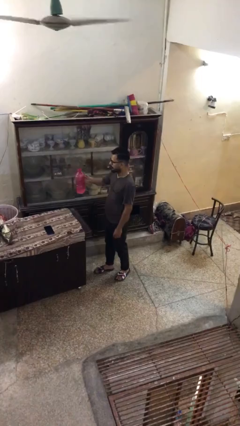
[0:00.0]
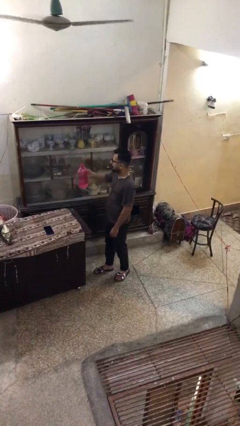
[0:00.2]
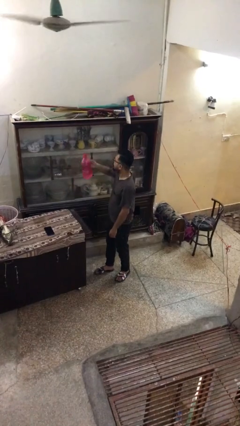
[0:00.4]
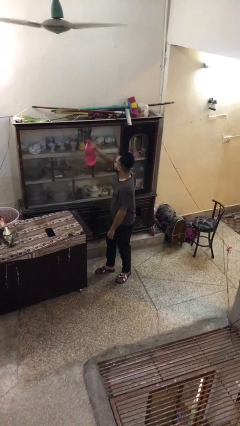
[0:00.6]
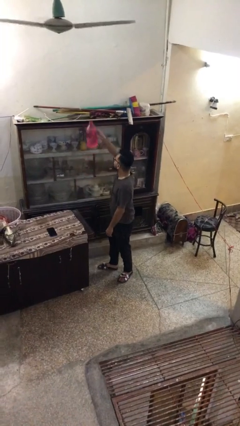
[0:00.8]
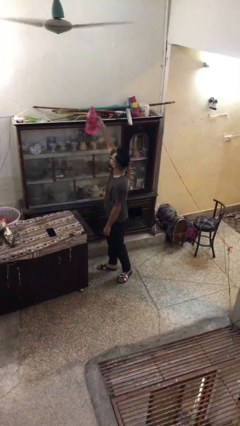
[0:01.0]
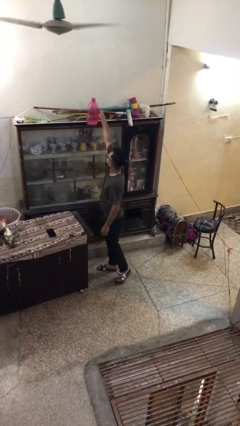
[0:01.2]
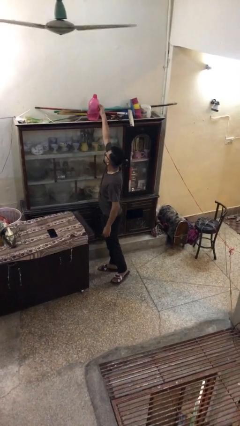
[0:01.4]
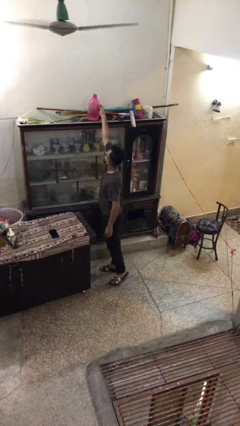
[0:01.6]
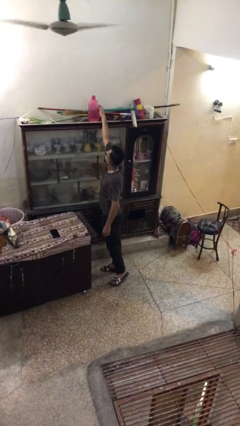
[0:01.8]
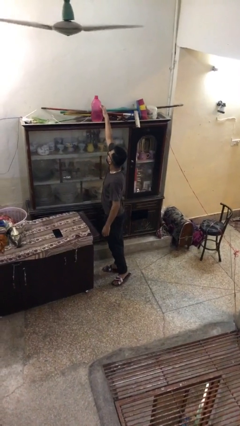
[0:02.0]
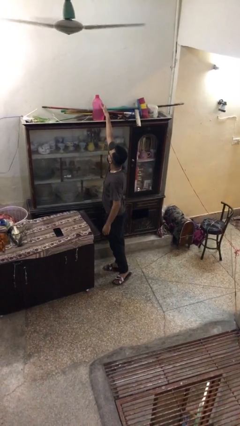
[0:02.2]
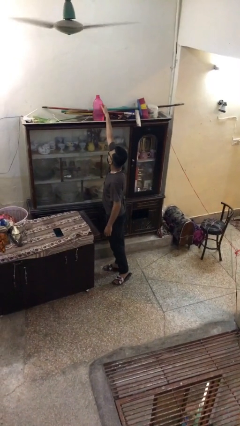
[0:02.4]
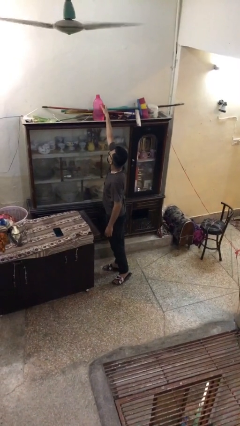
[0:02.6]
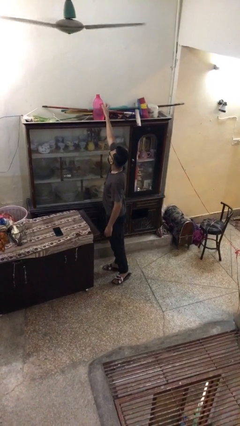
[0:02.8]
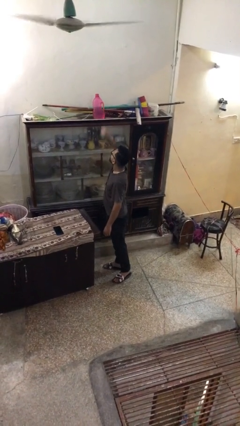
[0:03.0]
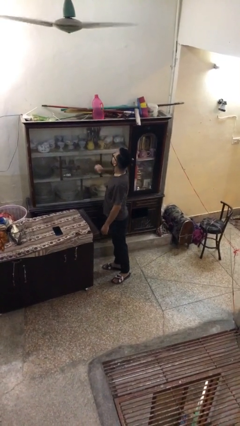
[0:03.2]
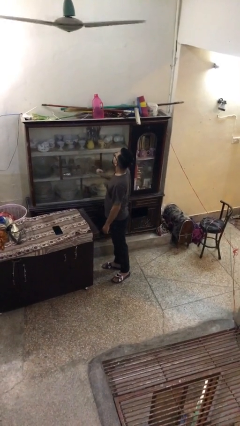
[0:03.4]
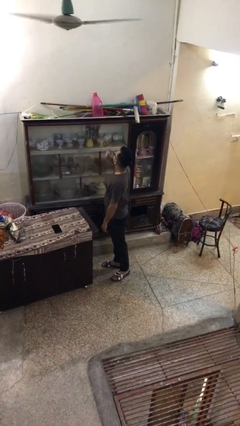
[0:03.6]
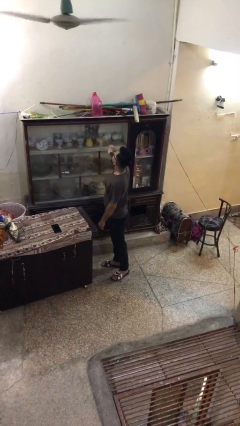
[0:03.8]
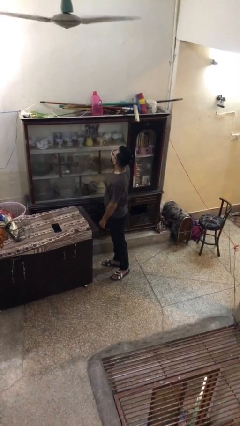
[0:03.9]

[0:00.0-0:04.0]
person puts down object on shelf

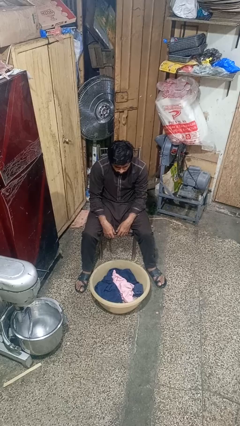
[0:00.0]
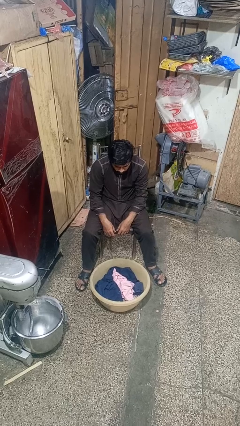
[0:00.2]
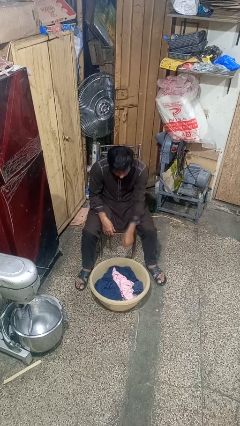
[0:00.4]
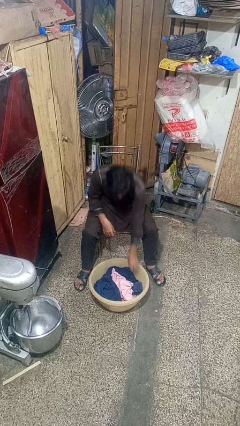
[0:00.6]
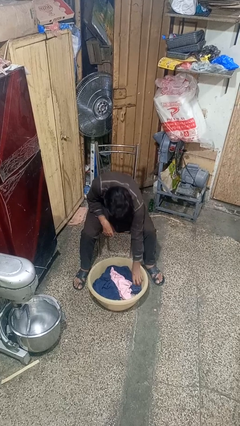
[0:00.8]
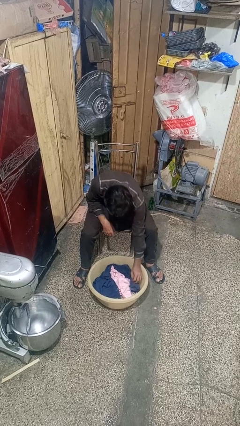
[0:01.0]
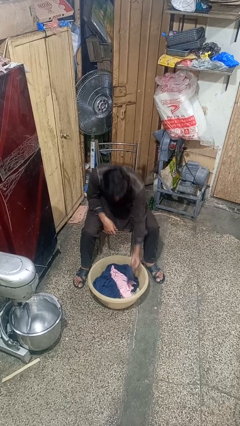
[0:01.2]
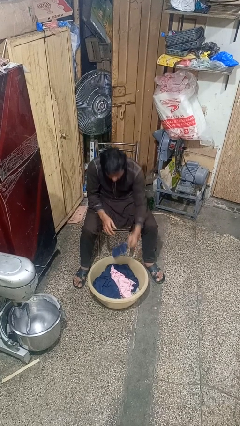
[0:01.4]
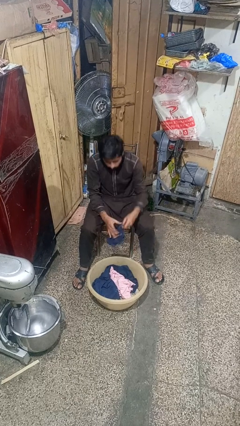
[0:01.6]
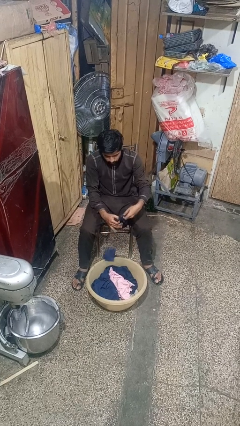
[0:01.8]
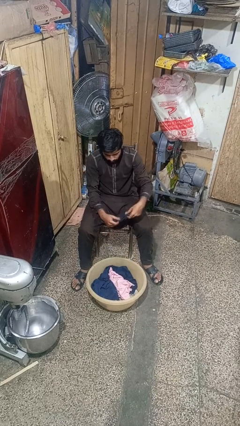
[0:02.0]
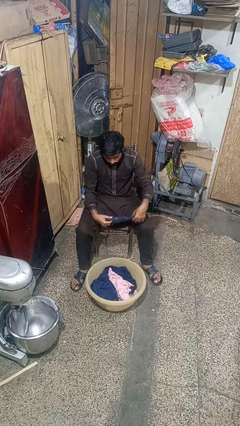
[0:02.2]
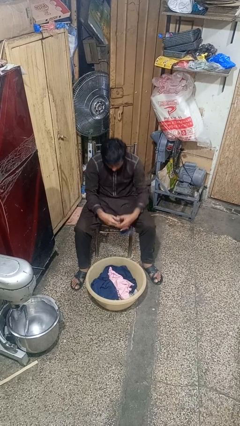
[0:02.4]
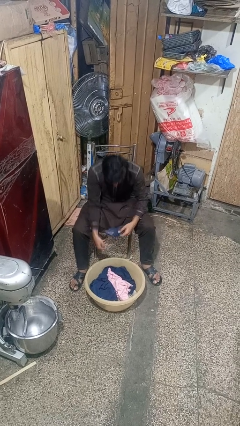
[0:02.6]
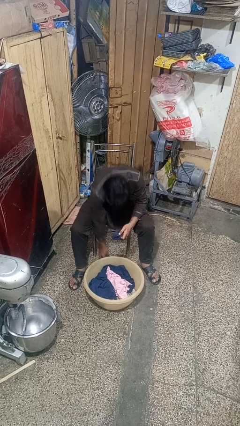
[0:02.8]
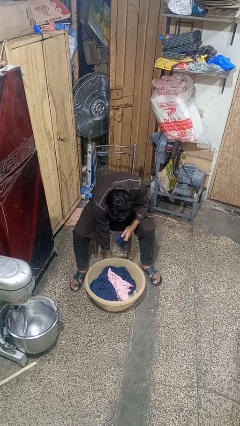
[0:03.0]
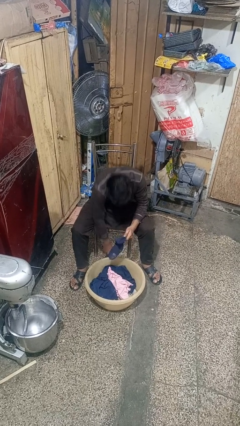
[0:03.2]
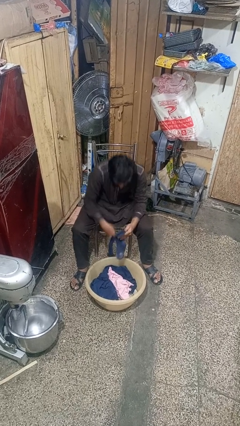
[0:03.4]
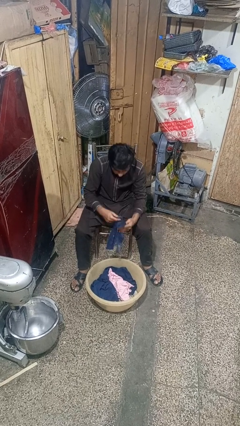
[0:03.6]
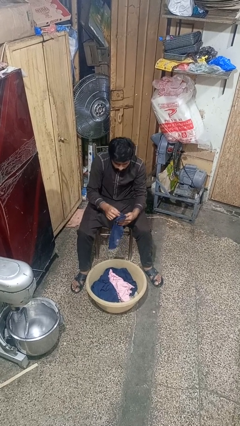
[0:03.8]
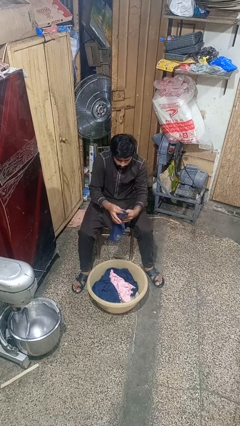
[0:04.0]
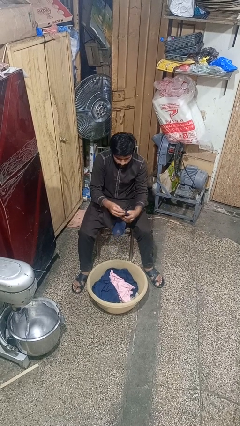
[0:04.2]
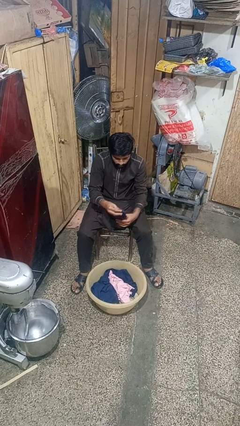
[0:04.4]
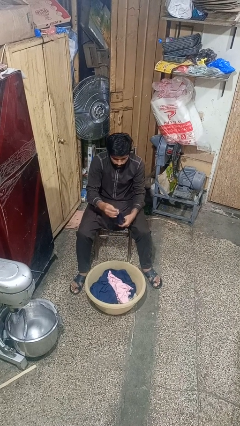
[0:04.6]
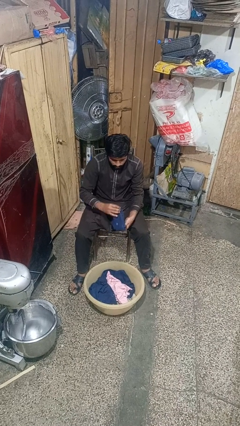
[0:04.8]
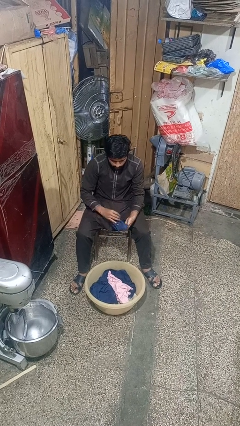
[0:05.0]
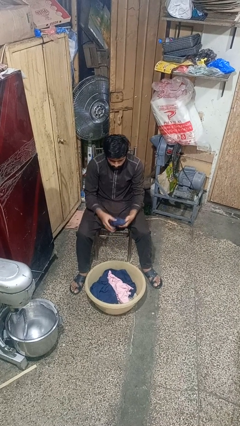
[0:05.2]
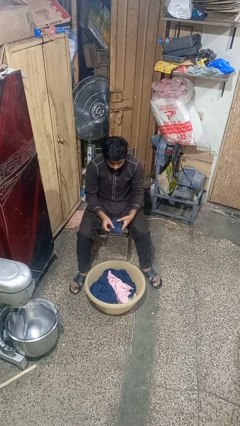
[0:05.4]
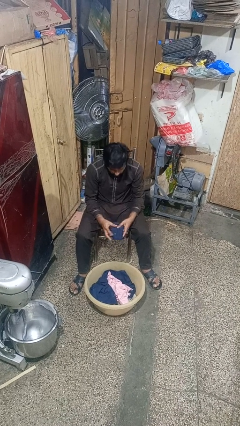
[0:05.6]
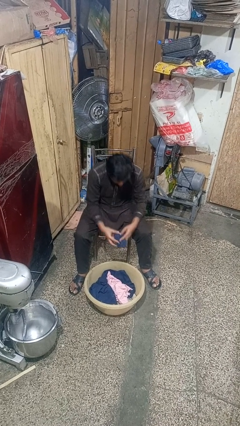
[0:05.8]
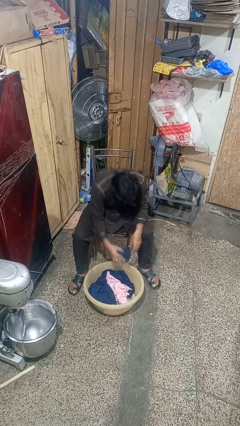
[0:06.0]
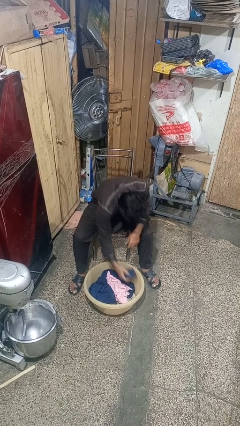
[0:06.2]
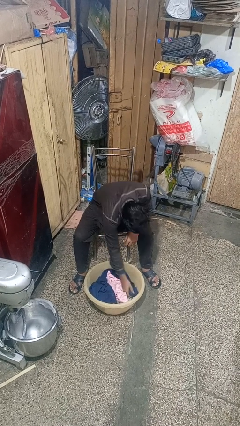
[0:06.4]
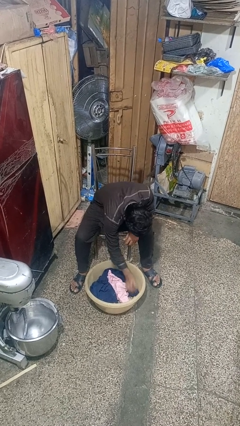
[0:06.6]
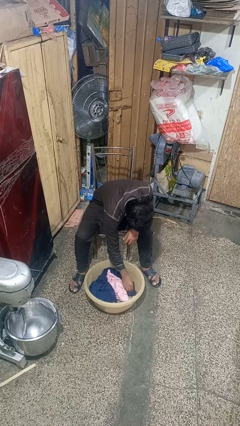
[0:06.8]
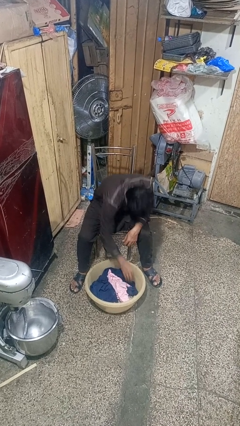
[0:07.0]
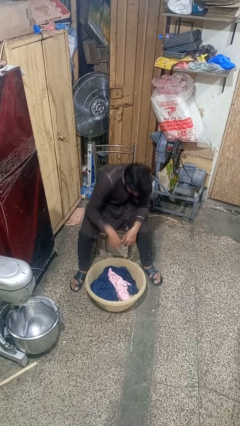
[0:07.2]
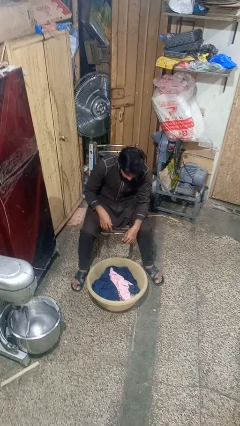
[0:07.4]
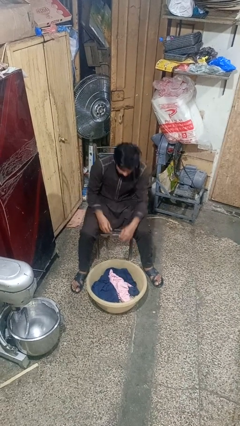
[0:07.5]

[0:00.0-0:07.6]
person folds socks

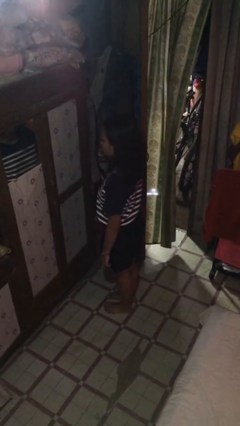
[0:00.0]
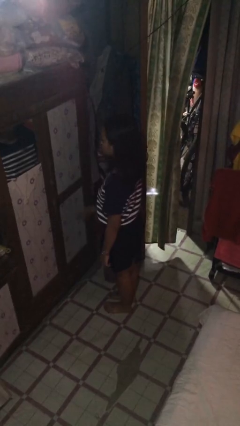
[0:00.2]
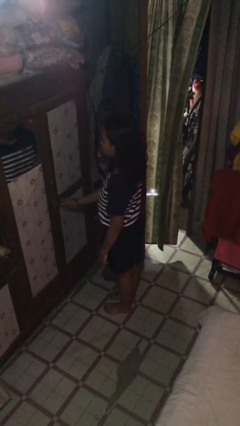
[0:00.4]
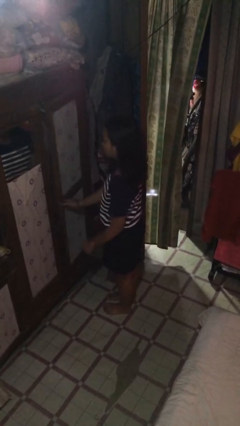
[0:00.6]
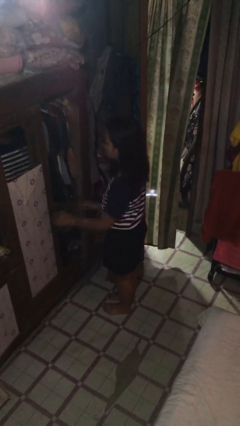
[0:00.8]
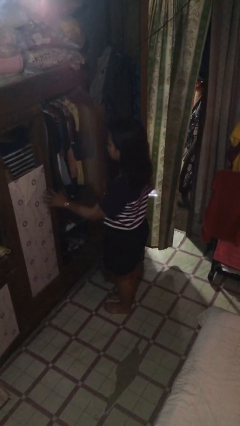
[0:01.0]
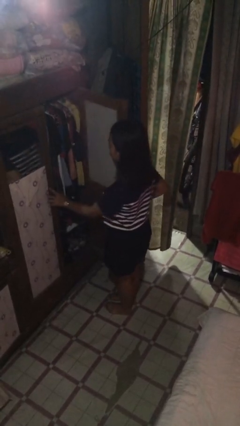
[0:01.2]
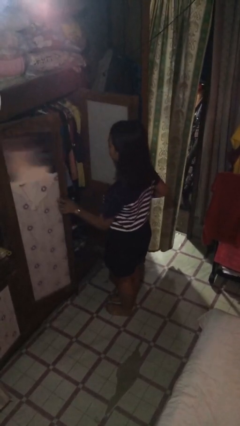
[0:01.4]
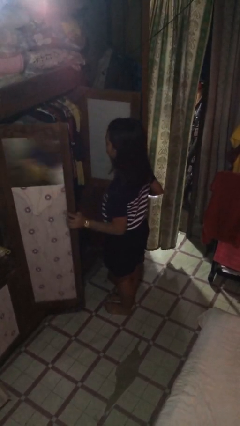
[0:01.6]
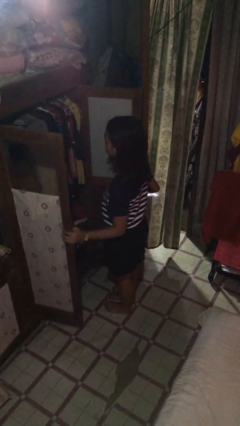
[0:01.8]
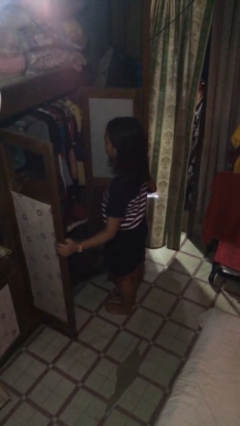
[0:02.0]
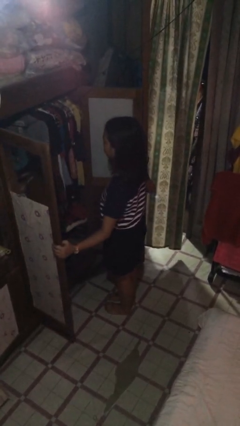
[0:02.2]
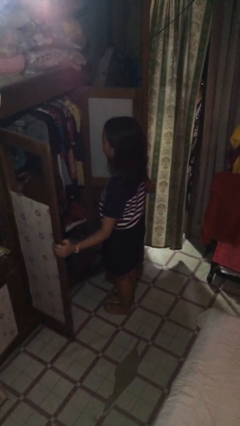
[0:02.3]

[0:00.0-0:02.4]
person opens closet door

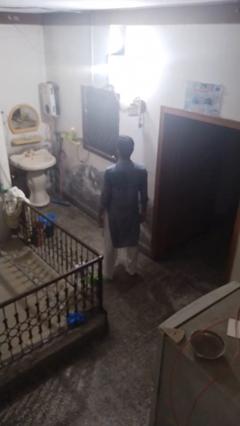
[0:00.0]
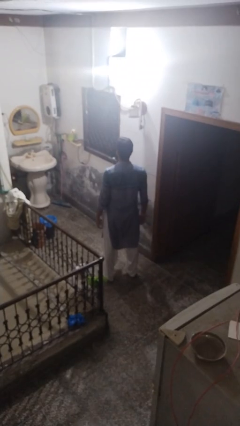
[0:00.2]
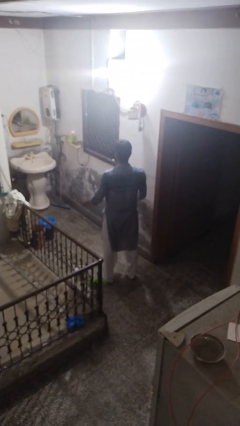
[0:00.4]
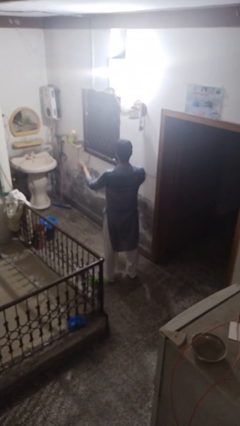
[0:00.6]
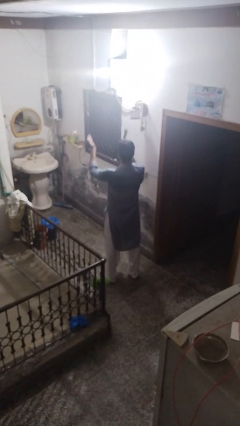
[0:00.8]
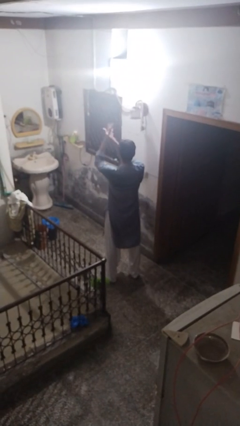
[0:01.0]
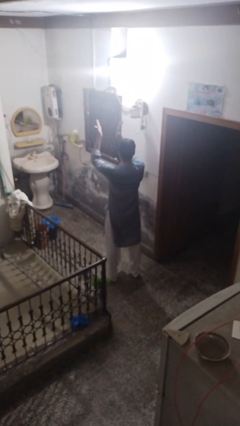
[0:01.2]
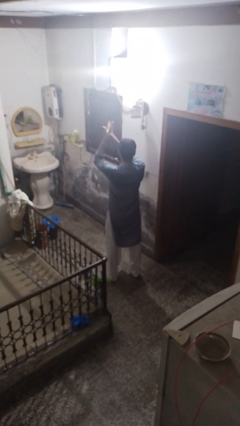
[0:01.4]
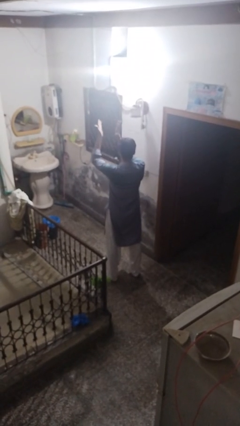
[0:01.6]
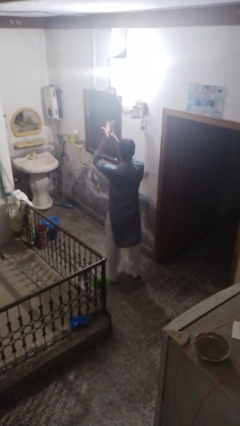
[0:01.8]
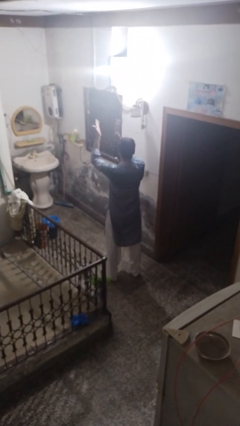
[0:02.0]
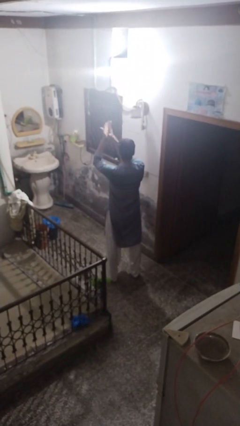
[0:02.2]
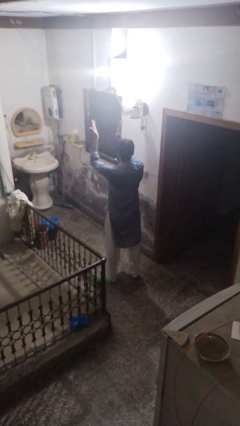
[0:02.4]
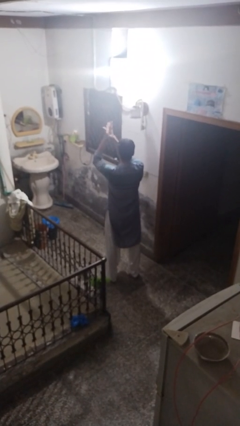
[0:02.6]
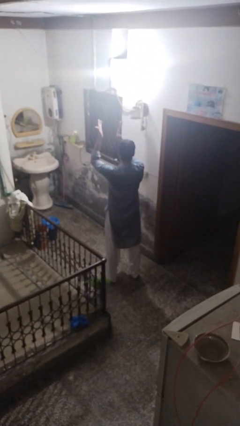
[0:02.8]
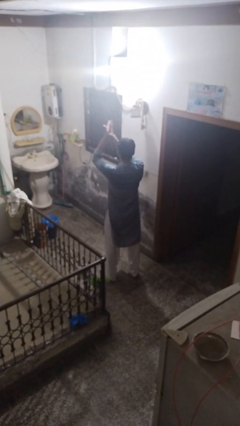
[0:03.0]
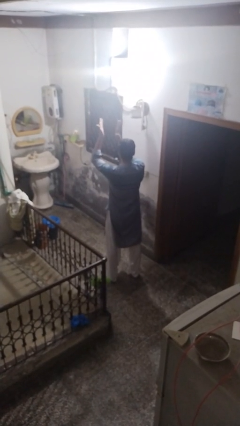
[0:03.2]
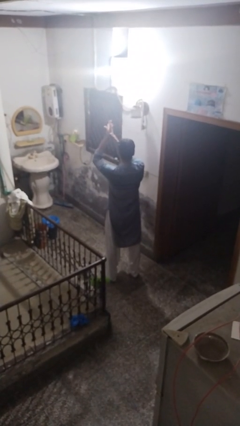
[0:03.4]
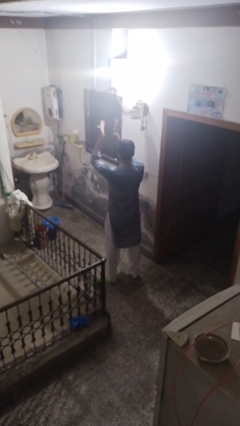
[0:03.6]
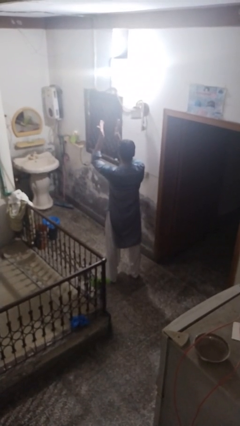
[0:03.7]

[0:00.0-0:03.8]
person claps hands
